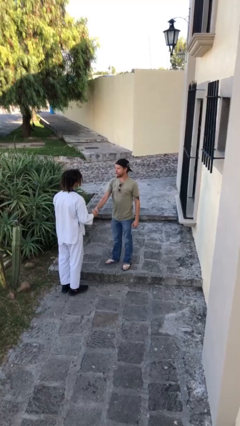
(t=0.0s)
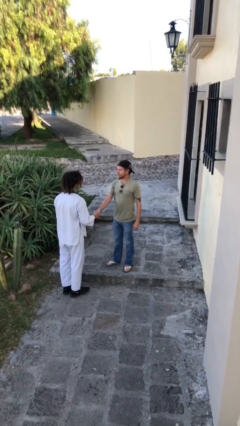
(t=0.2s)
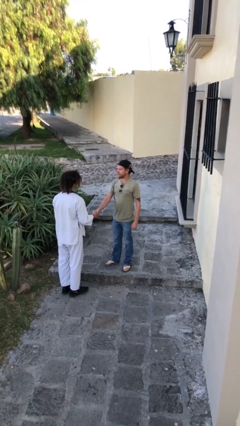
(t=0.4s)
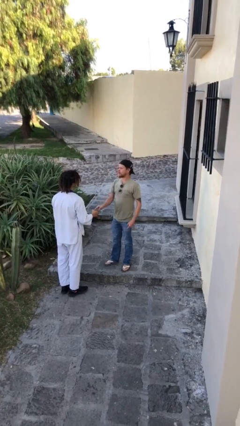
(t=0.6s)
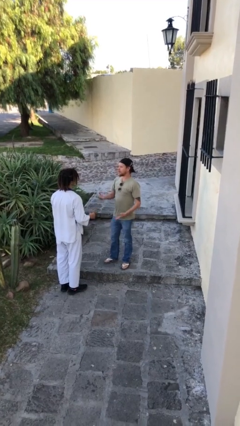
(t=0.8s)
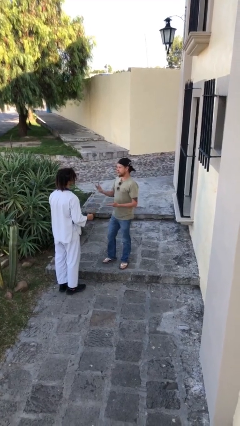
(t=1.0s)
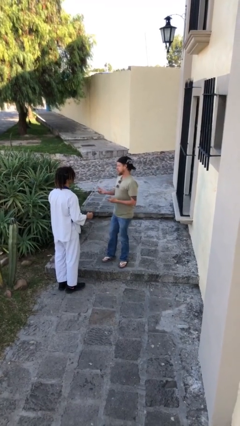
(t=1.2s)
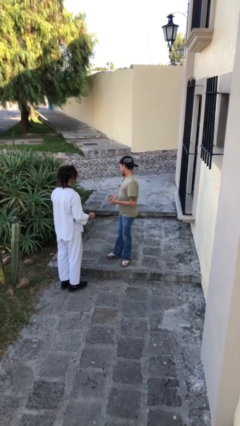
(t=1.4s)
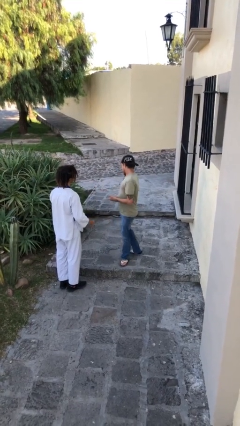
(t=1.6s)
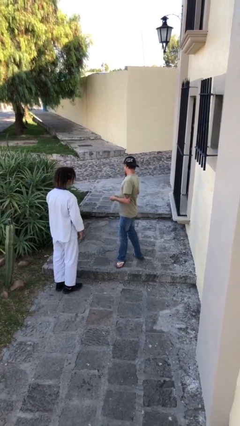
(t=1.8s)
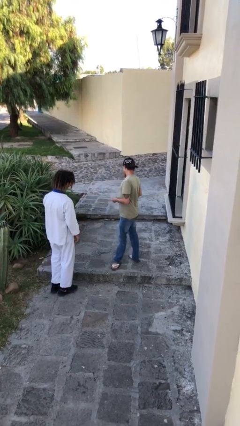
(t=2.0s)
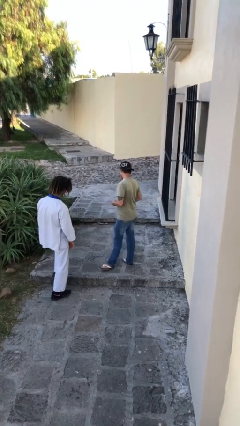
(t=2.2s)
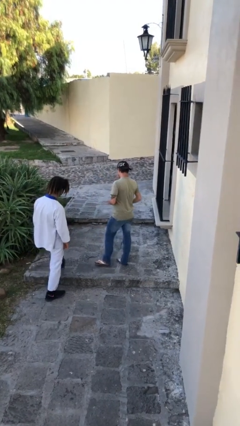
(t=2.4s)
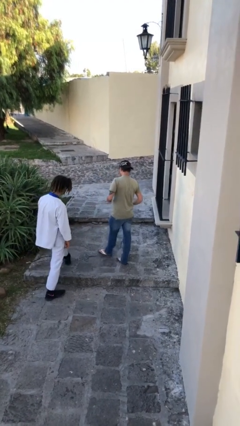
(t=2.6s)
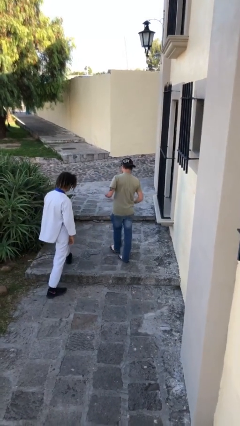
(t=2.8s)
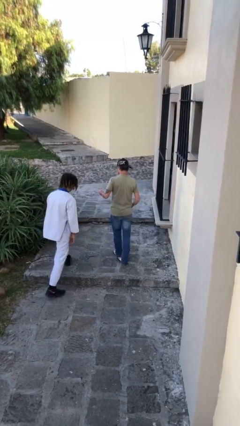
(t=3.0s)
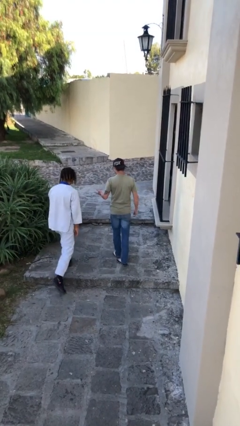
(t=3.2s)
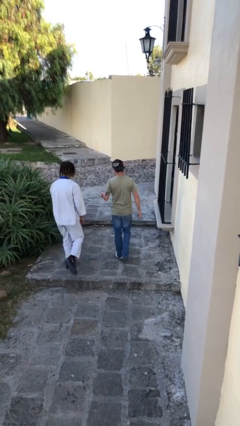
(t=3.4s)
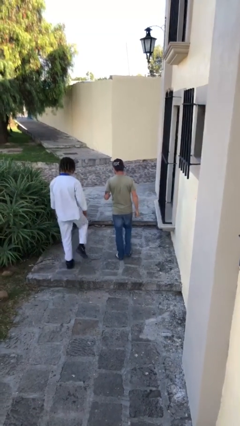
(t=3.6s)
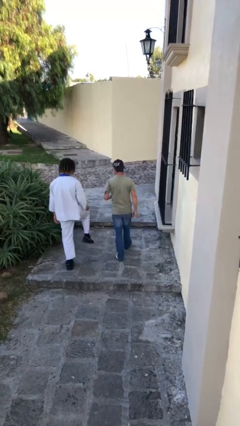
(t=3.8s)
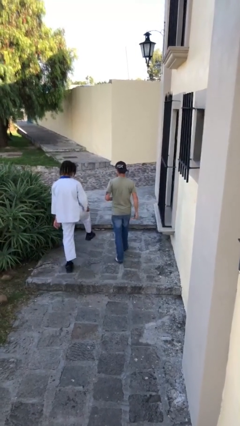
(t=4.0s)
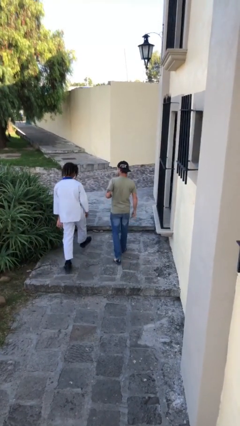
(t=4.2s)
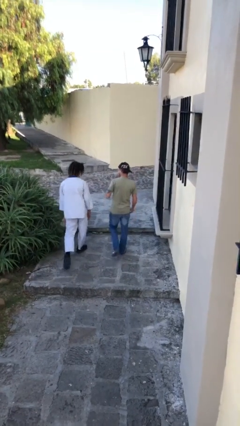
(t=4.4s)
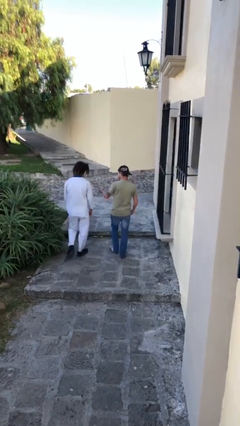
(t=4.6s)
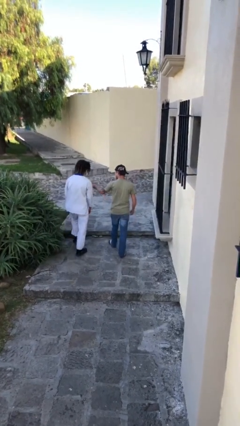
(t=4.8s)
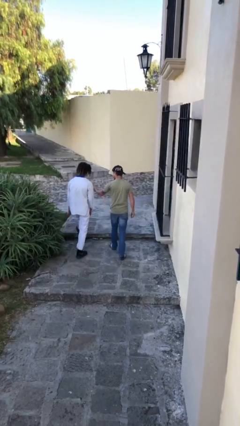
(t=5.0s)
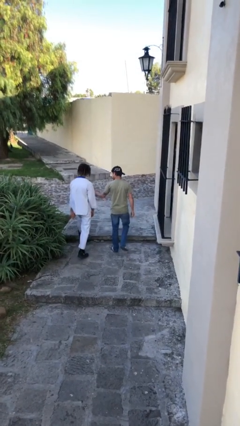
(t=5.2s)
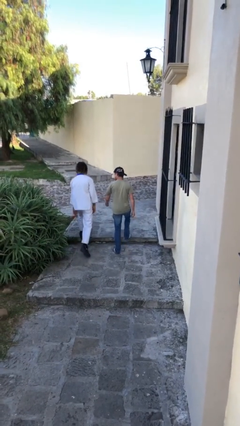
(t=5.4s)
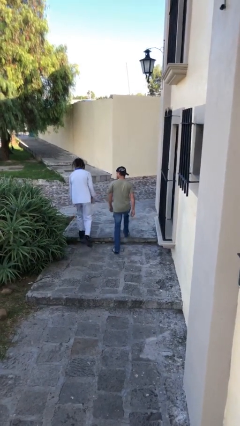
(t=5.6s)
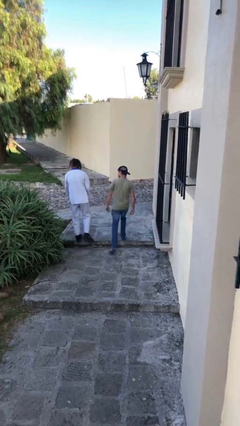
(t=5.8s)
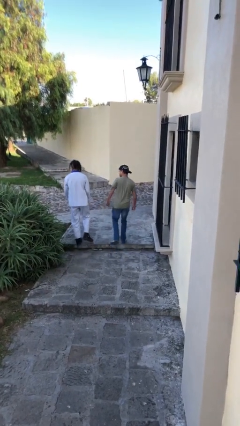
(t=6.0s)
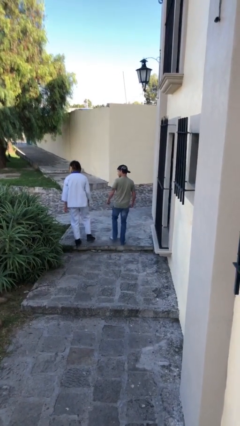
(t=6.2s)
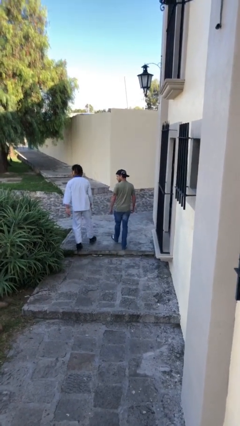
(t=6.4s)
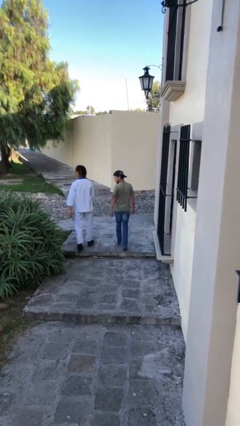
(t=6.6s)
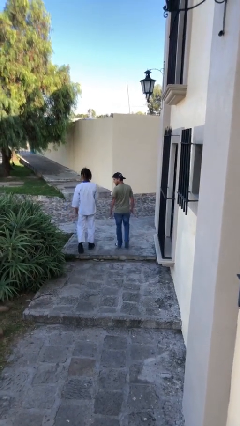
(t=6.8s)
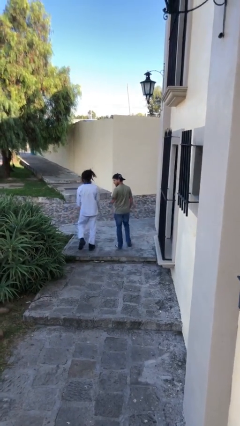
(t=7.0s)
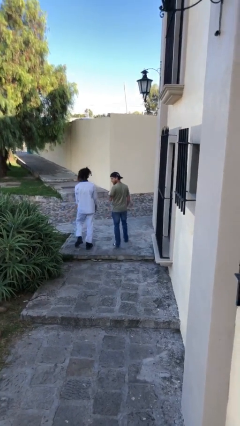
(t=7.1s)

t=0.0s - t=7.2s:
person talks to person

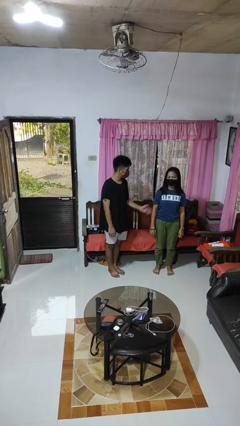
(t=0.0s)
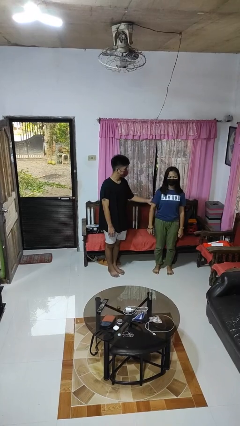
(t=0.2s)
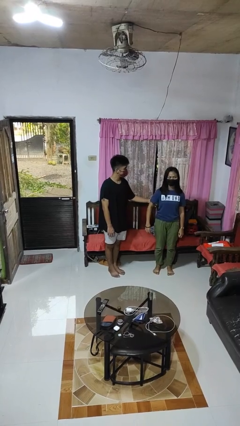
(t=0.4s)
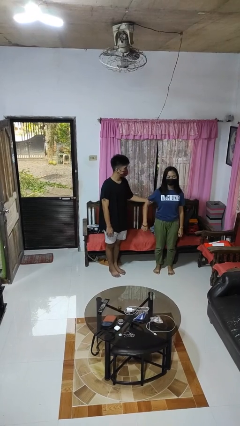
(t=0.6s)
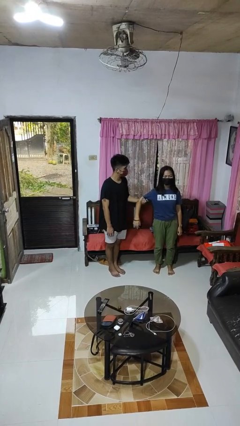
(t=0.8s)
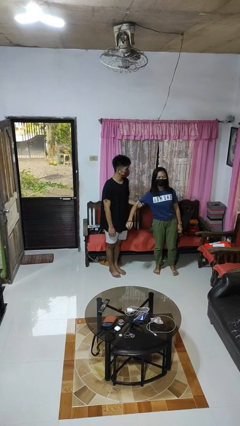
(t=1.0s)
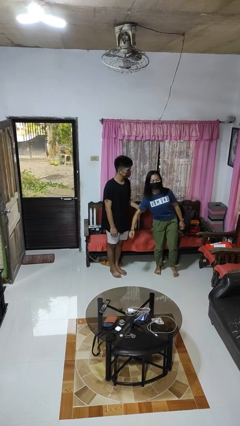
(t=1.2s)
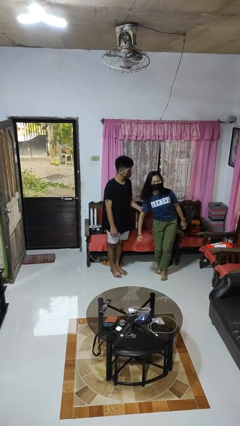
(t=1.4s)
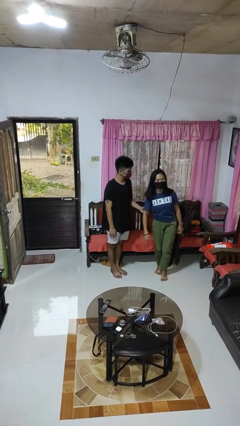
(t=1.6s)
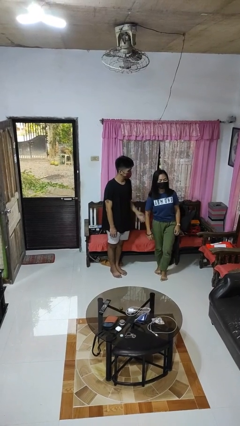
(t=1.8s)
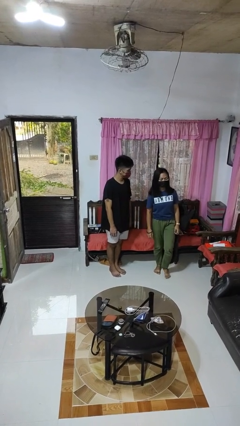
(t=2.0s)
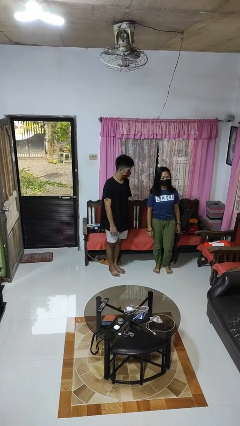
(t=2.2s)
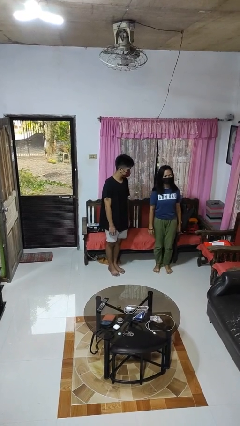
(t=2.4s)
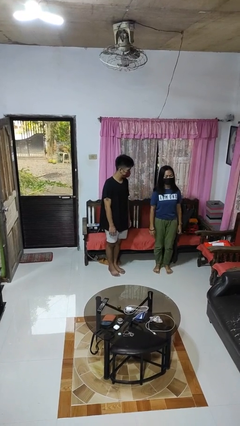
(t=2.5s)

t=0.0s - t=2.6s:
person grabs person by bicep

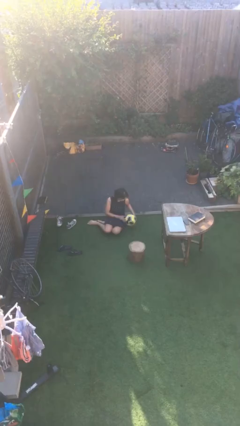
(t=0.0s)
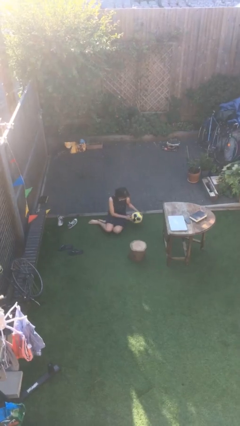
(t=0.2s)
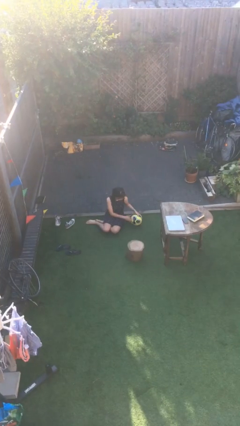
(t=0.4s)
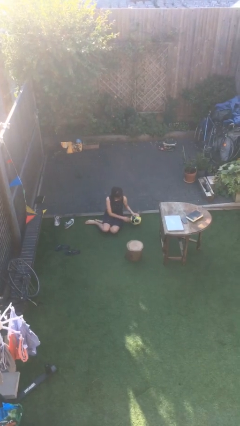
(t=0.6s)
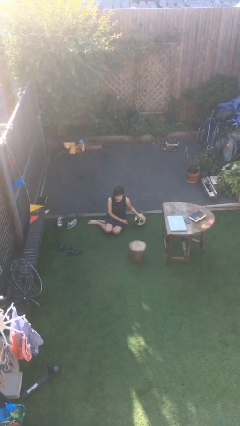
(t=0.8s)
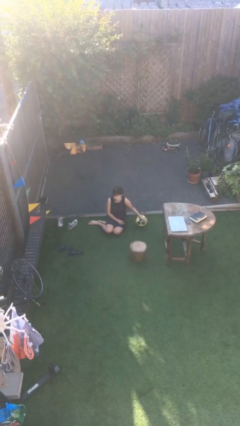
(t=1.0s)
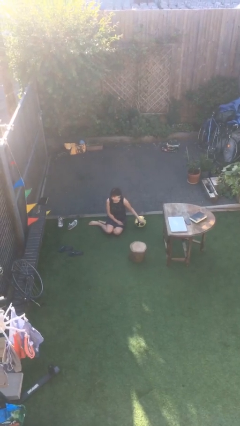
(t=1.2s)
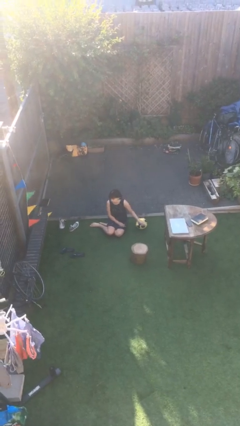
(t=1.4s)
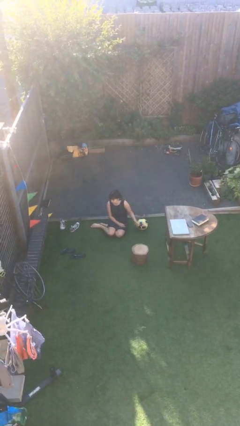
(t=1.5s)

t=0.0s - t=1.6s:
person puts down object on floor

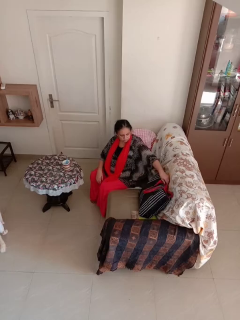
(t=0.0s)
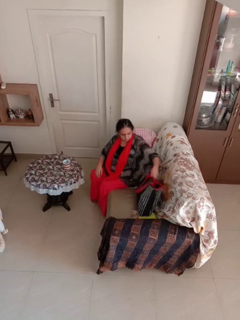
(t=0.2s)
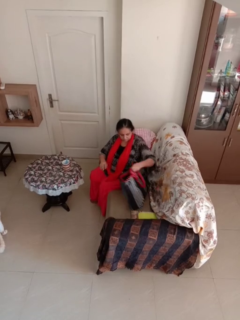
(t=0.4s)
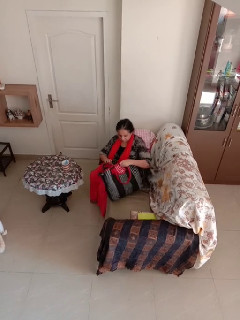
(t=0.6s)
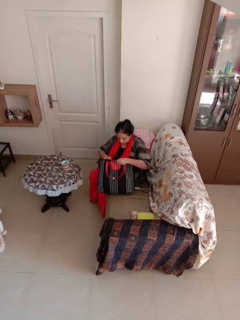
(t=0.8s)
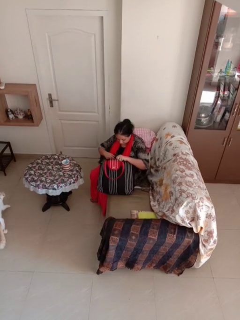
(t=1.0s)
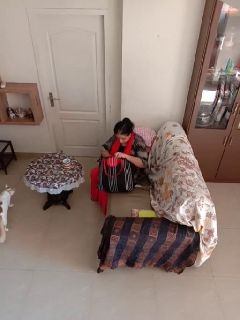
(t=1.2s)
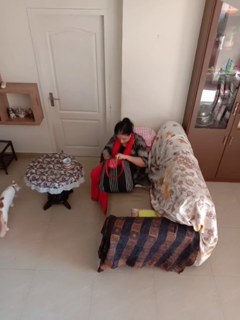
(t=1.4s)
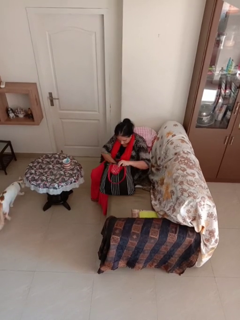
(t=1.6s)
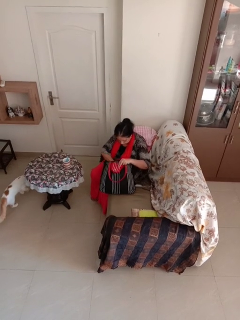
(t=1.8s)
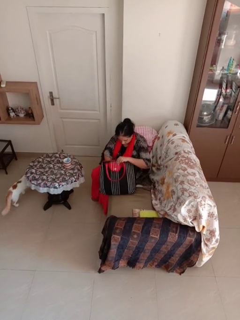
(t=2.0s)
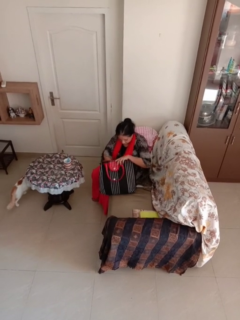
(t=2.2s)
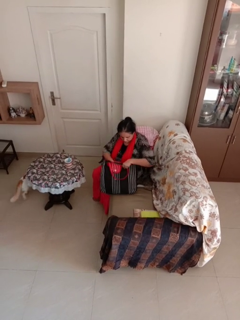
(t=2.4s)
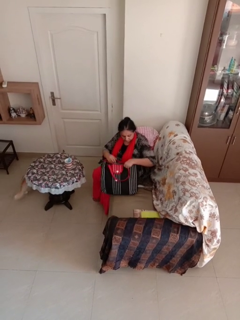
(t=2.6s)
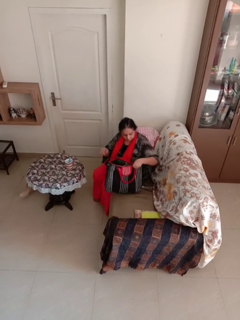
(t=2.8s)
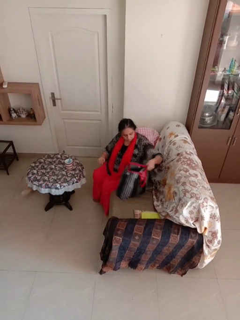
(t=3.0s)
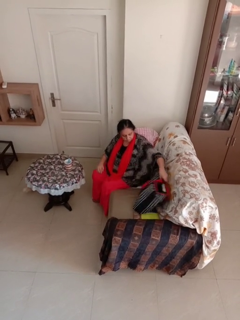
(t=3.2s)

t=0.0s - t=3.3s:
person searches in bag

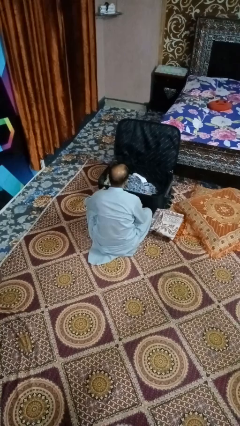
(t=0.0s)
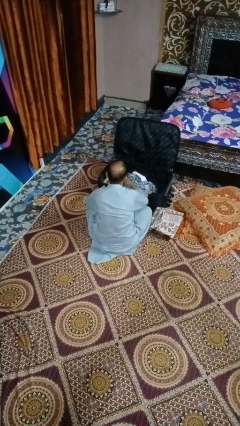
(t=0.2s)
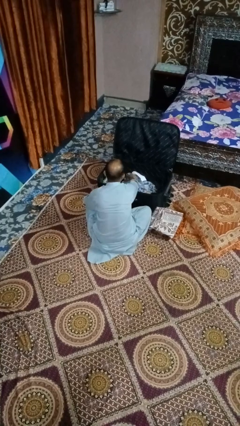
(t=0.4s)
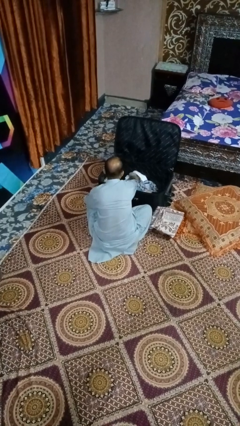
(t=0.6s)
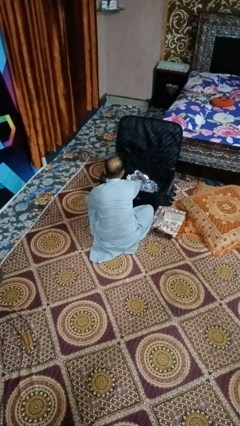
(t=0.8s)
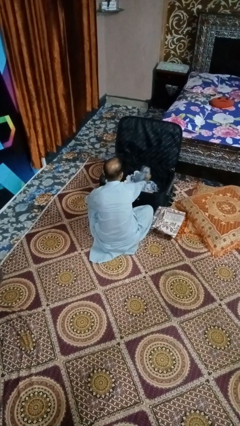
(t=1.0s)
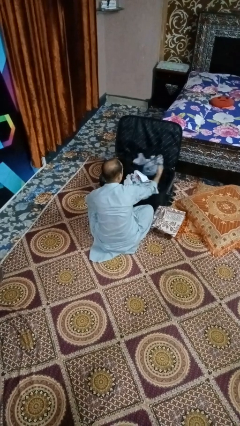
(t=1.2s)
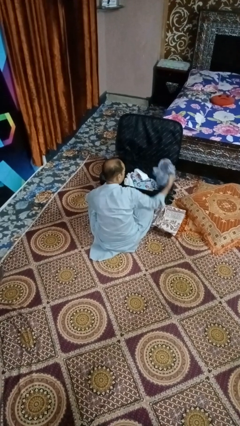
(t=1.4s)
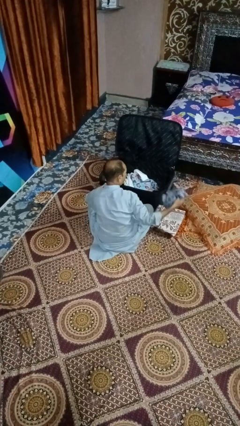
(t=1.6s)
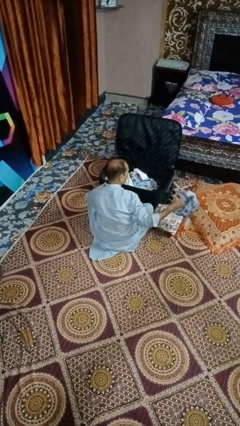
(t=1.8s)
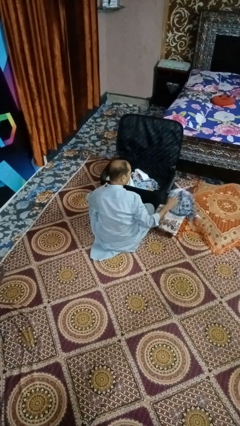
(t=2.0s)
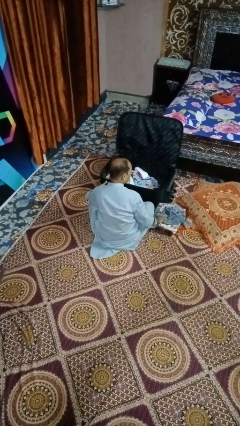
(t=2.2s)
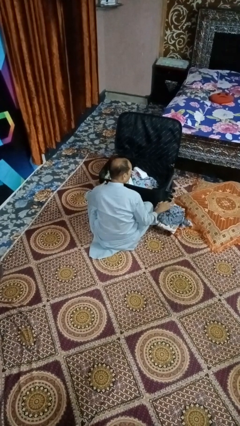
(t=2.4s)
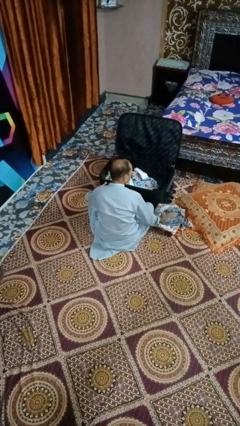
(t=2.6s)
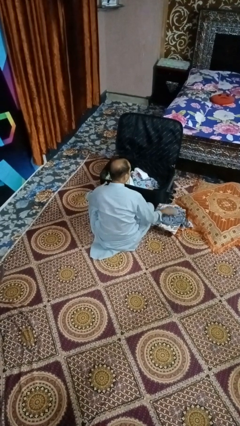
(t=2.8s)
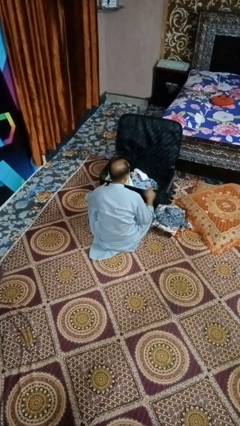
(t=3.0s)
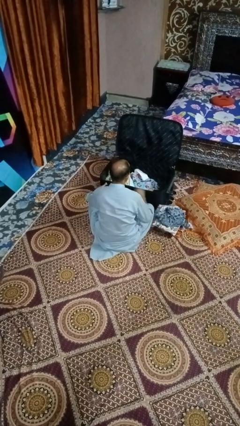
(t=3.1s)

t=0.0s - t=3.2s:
person unloads clothes from suitcase
